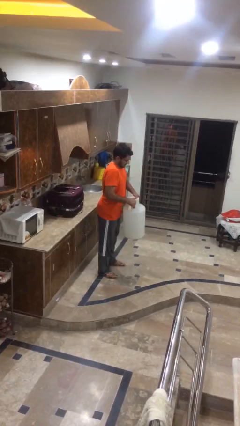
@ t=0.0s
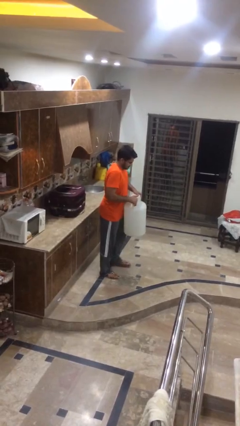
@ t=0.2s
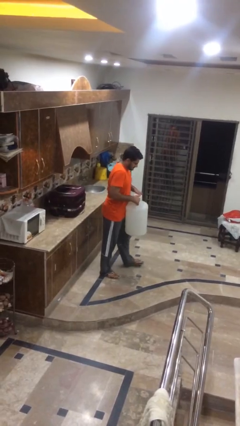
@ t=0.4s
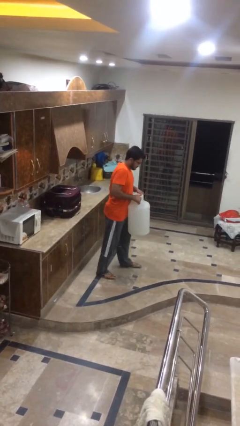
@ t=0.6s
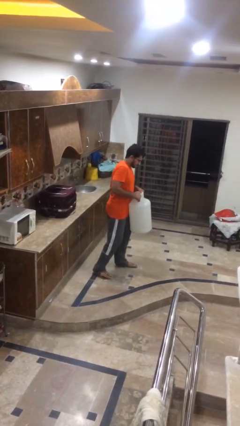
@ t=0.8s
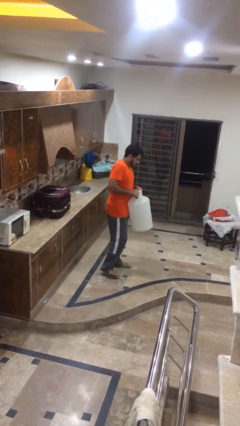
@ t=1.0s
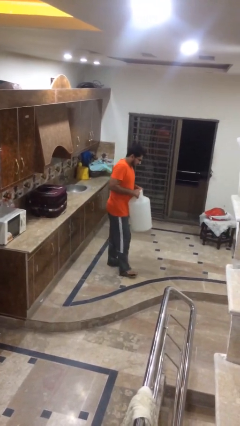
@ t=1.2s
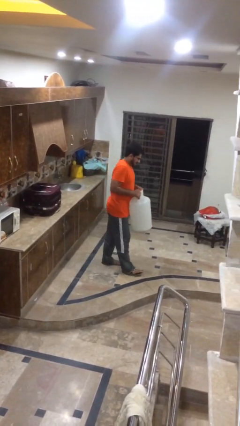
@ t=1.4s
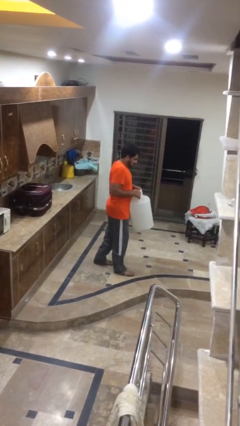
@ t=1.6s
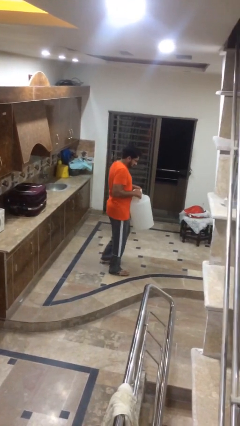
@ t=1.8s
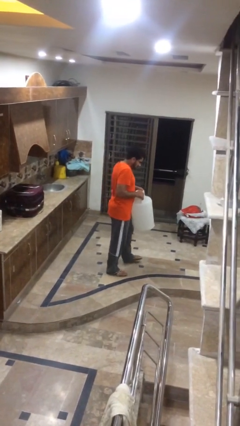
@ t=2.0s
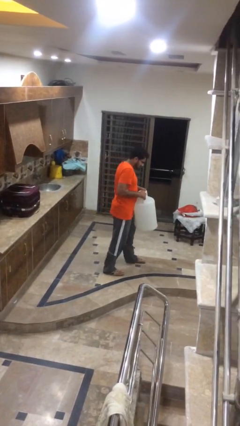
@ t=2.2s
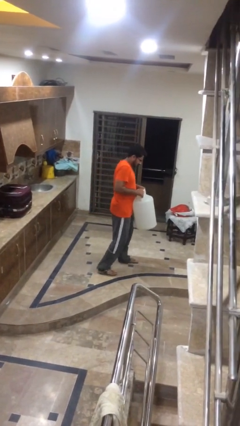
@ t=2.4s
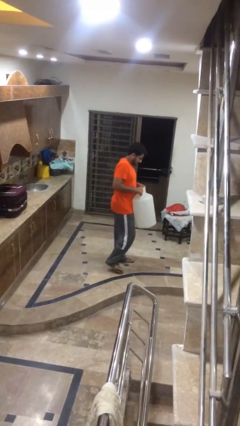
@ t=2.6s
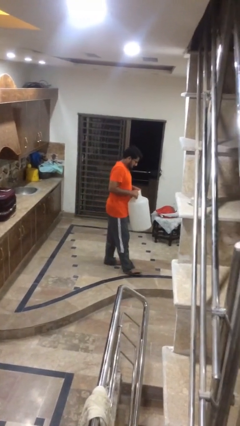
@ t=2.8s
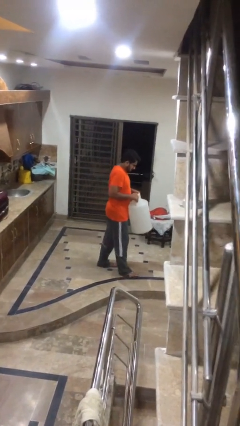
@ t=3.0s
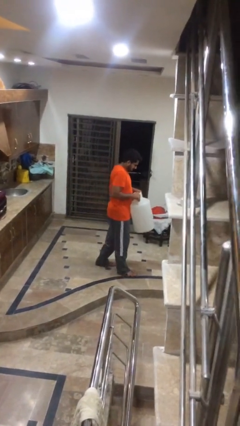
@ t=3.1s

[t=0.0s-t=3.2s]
person carries heavy object

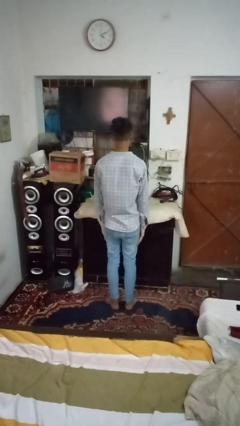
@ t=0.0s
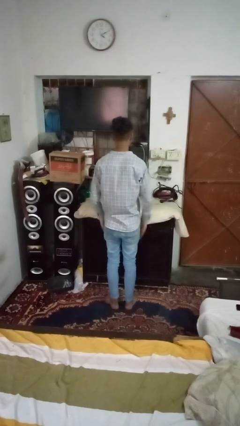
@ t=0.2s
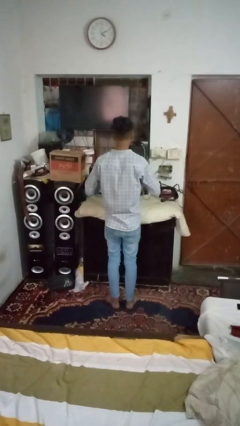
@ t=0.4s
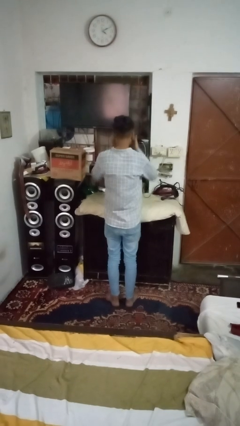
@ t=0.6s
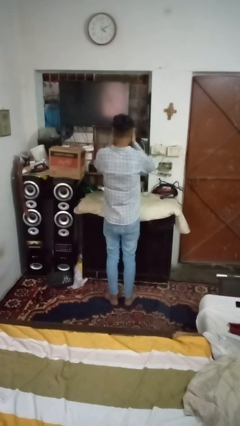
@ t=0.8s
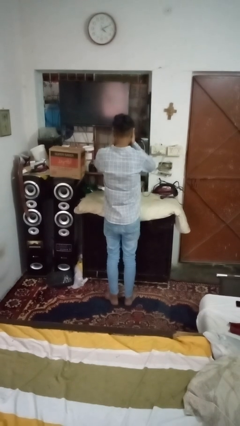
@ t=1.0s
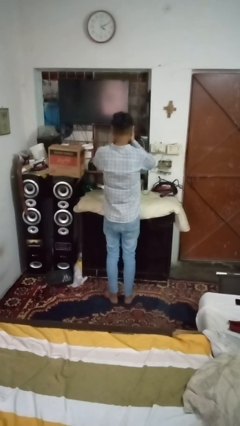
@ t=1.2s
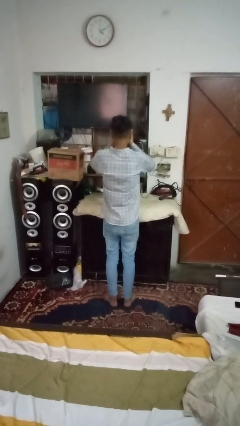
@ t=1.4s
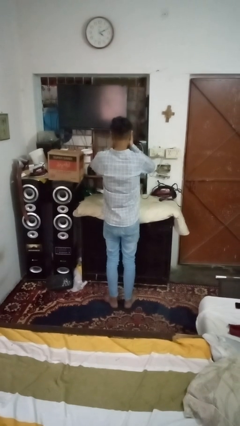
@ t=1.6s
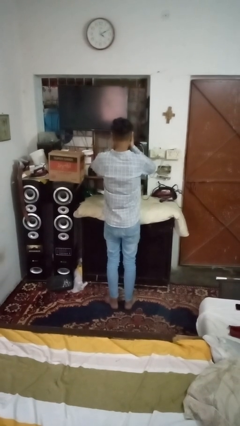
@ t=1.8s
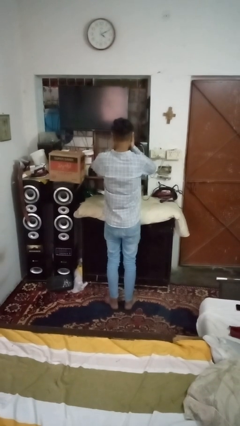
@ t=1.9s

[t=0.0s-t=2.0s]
person covers face with hands

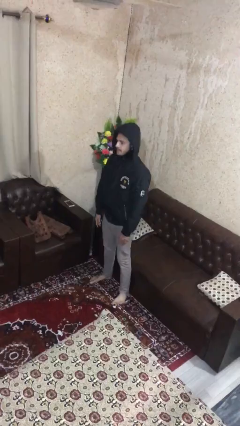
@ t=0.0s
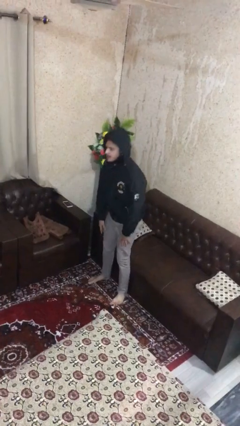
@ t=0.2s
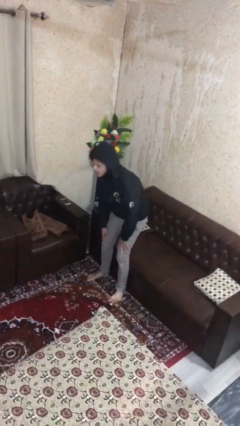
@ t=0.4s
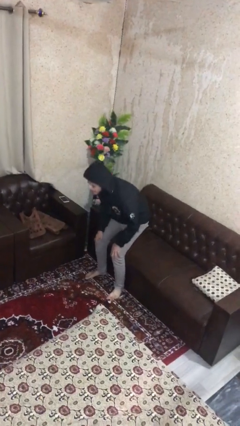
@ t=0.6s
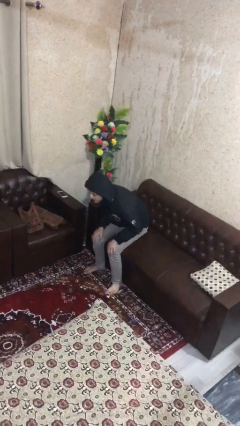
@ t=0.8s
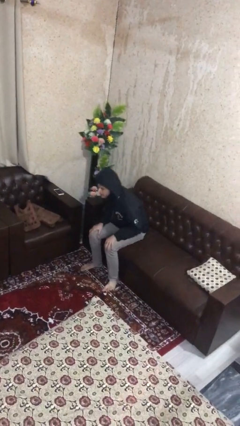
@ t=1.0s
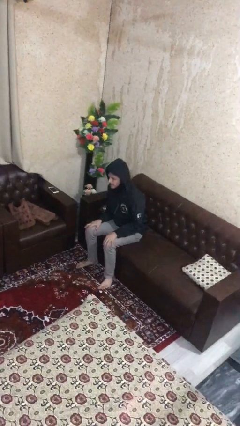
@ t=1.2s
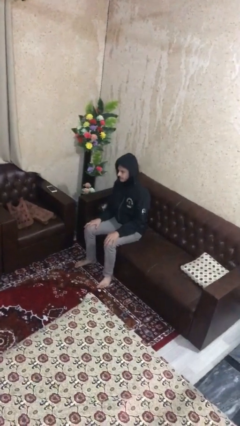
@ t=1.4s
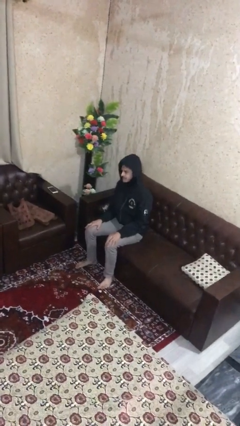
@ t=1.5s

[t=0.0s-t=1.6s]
person sits down

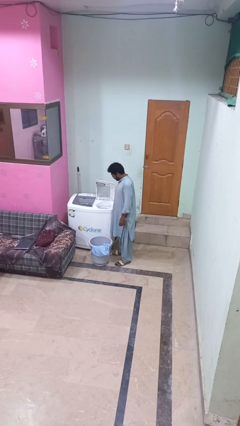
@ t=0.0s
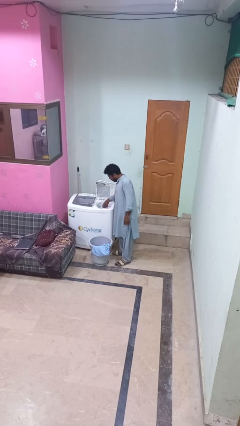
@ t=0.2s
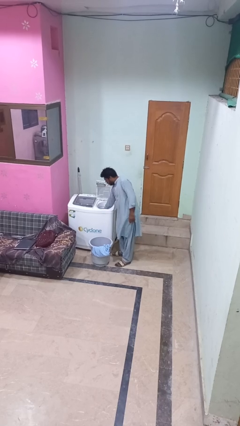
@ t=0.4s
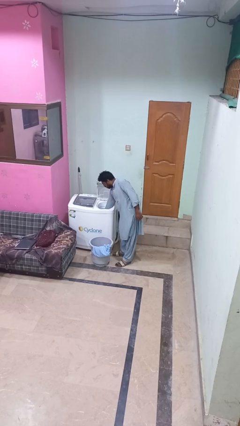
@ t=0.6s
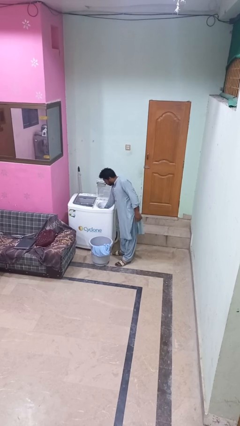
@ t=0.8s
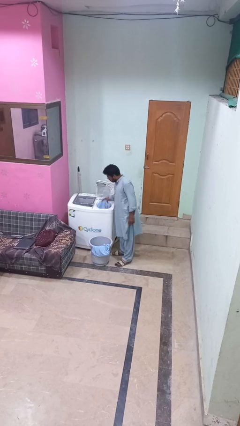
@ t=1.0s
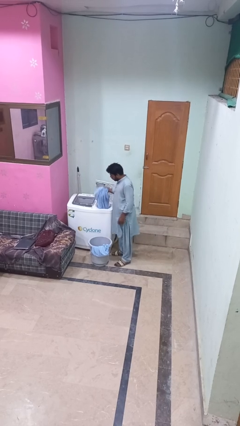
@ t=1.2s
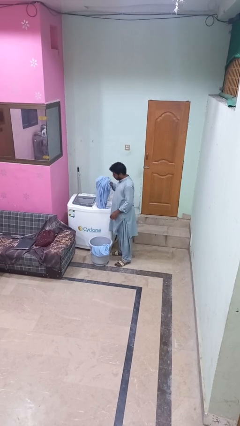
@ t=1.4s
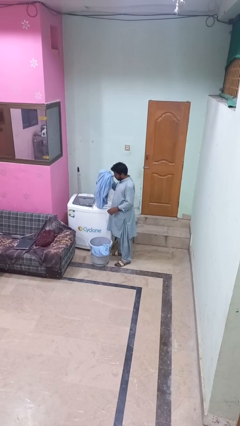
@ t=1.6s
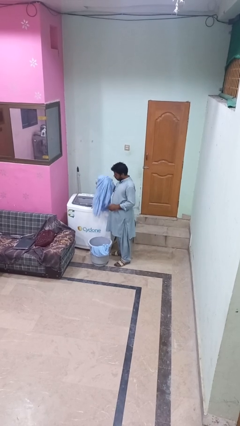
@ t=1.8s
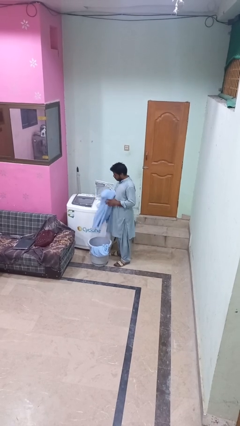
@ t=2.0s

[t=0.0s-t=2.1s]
person unloads dryer

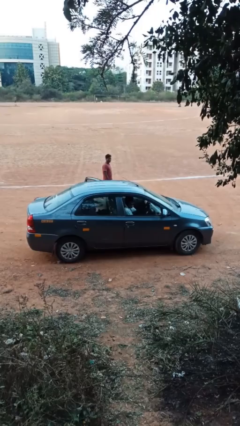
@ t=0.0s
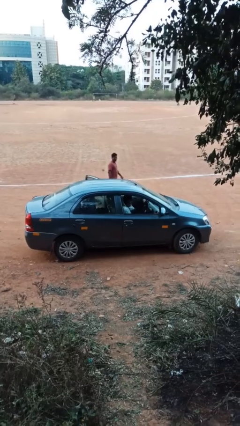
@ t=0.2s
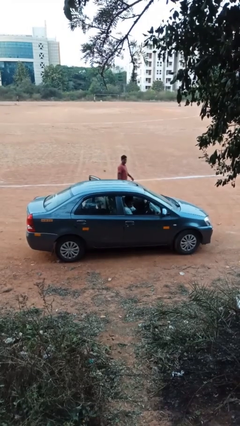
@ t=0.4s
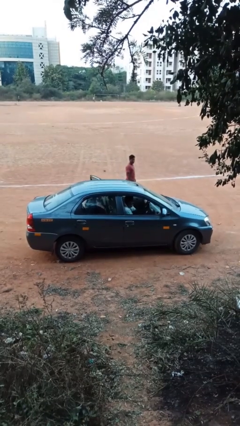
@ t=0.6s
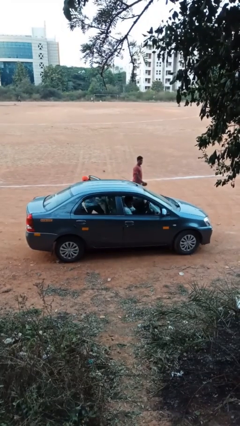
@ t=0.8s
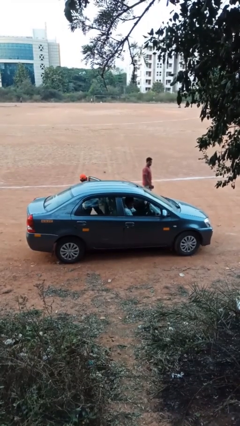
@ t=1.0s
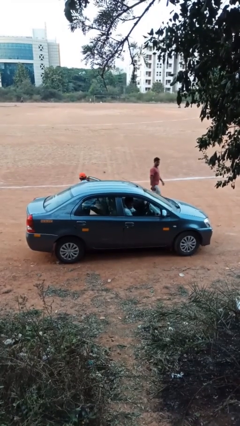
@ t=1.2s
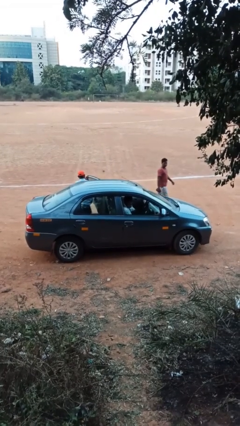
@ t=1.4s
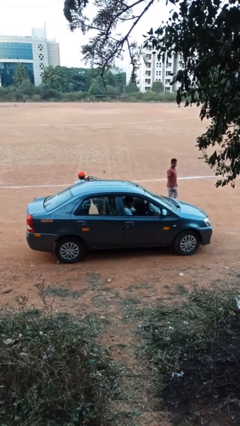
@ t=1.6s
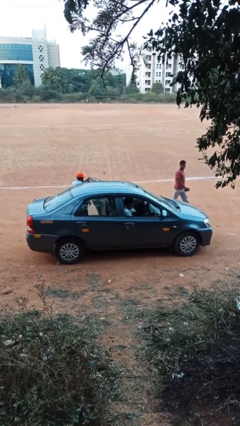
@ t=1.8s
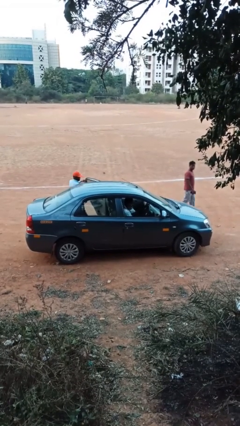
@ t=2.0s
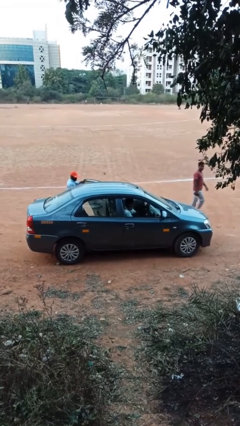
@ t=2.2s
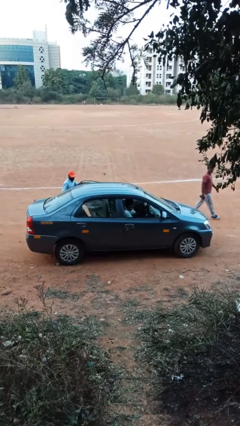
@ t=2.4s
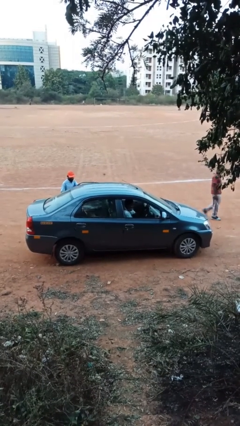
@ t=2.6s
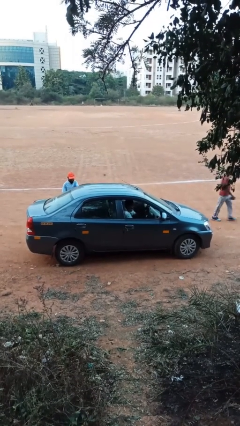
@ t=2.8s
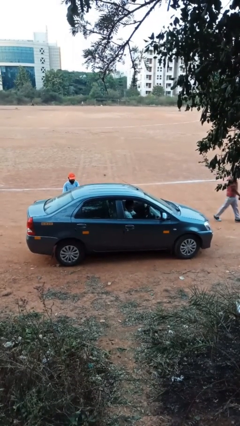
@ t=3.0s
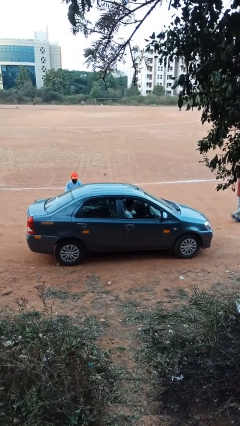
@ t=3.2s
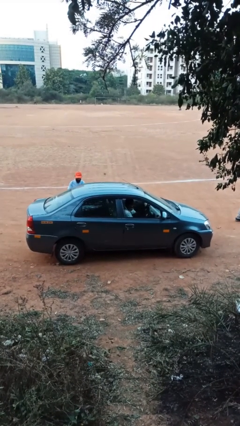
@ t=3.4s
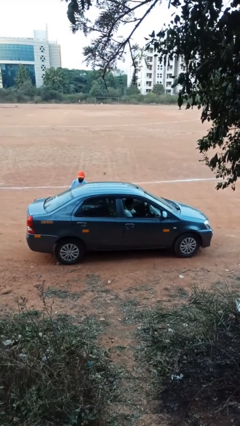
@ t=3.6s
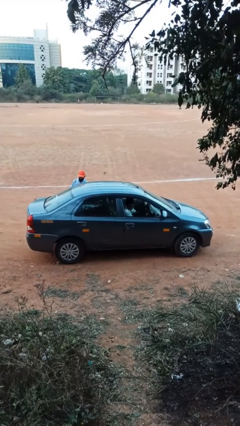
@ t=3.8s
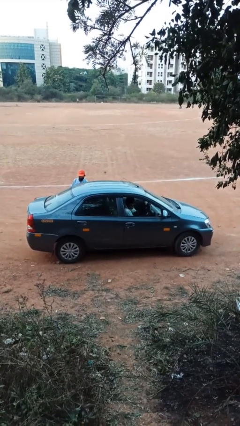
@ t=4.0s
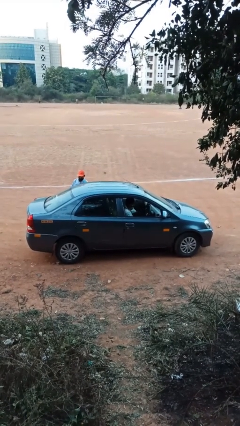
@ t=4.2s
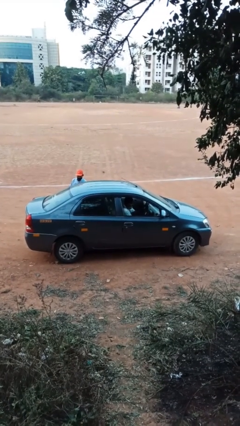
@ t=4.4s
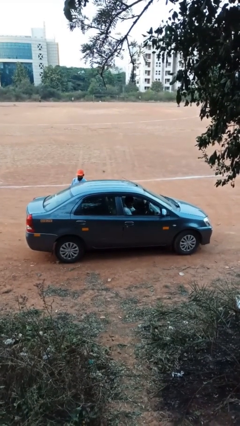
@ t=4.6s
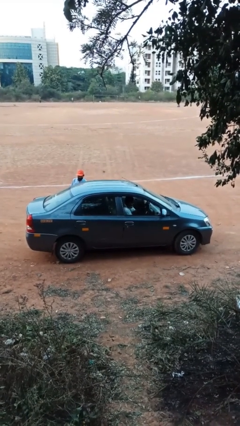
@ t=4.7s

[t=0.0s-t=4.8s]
car drops off person

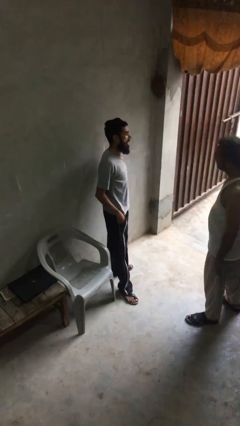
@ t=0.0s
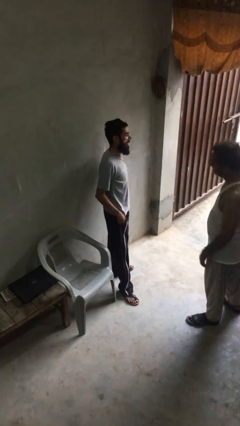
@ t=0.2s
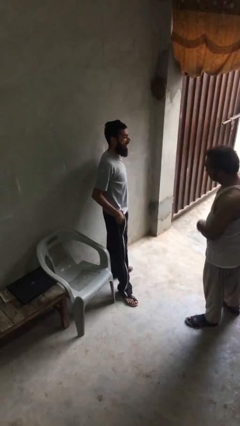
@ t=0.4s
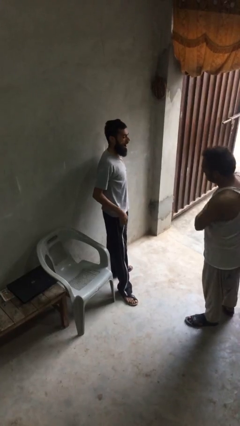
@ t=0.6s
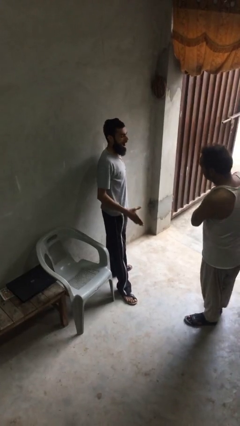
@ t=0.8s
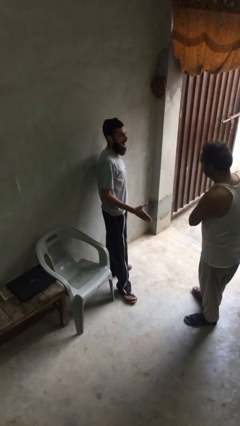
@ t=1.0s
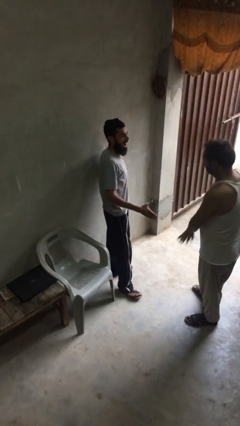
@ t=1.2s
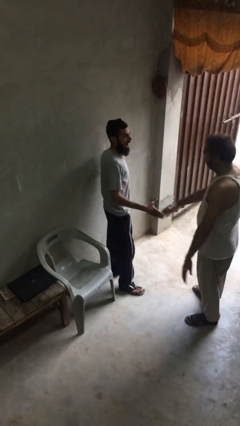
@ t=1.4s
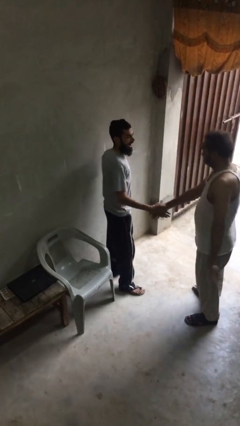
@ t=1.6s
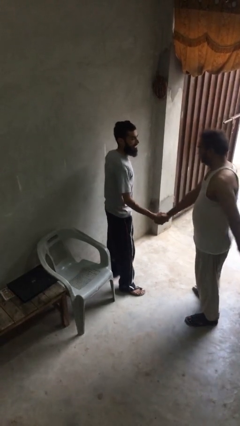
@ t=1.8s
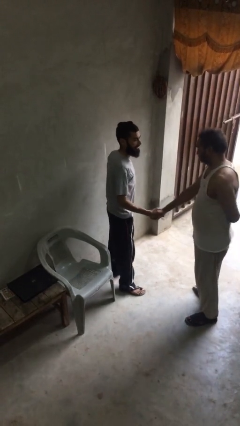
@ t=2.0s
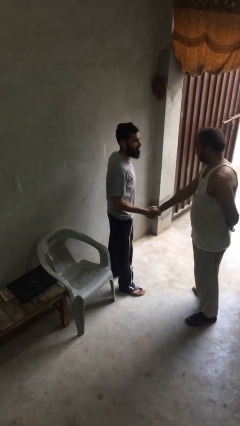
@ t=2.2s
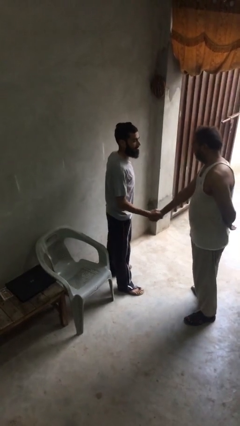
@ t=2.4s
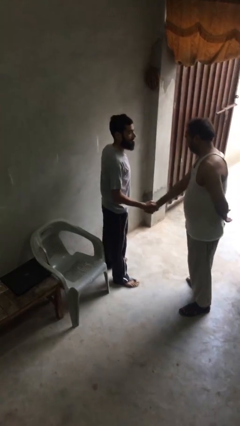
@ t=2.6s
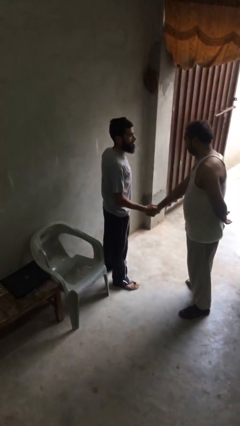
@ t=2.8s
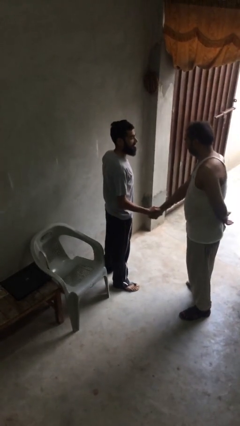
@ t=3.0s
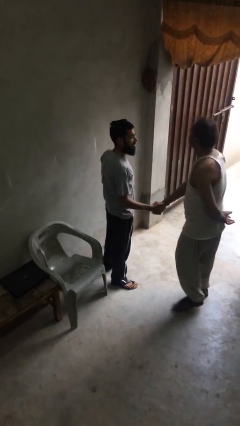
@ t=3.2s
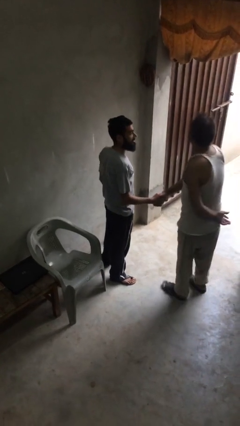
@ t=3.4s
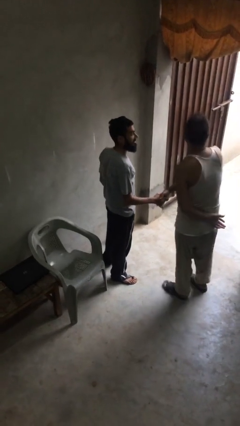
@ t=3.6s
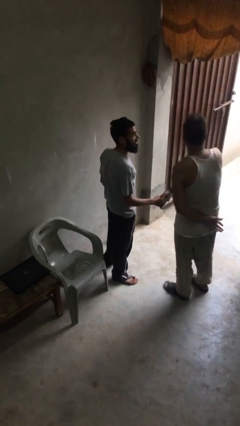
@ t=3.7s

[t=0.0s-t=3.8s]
person shakes hand
